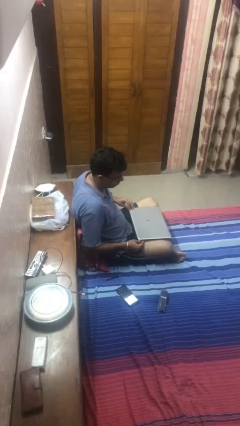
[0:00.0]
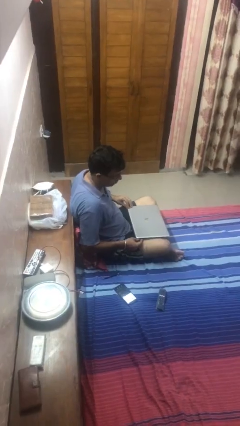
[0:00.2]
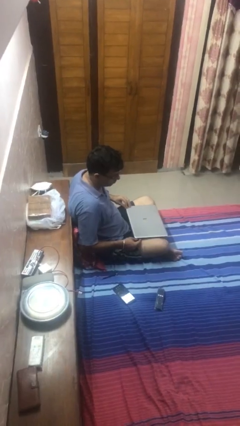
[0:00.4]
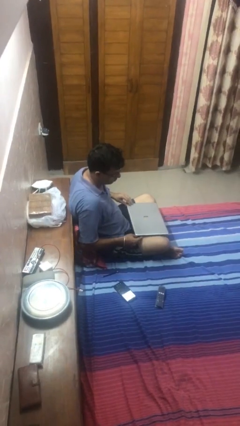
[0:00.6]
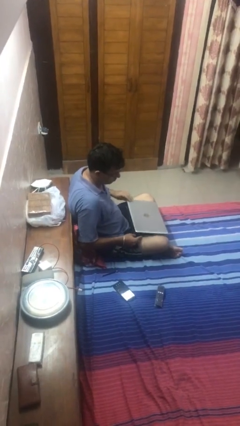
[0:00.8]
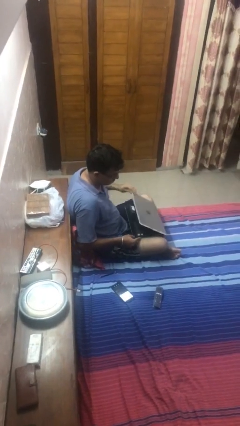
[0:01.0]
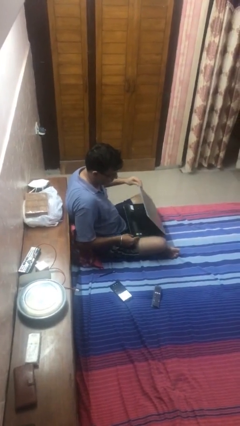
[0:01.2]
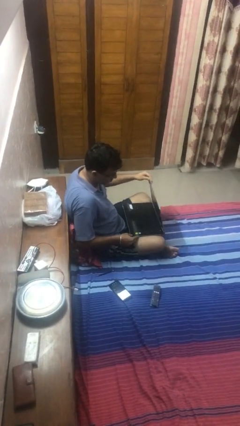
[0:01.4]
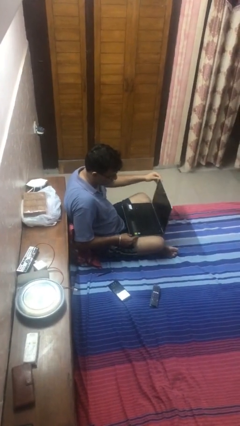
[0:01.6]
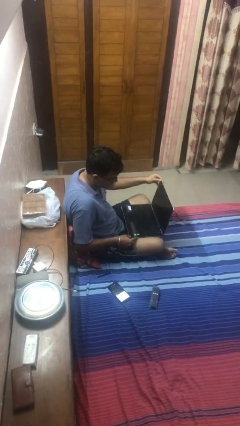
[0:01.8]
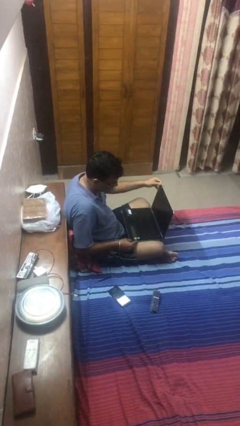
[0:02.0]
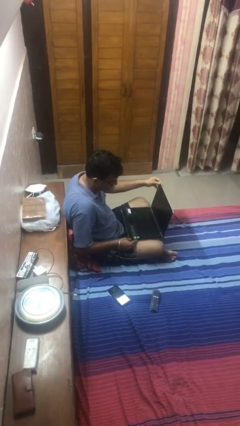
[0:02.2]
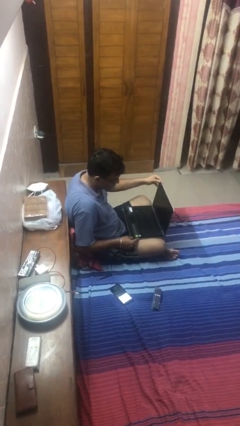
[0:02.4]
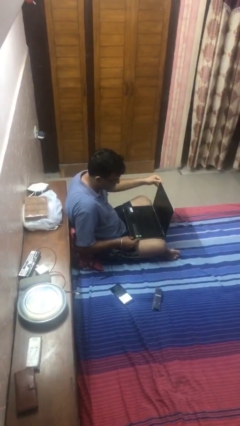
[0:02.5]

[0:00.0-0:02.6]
person opens laptop

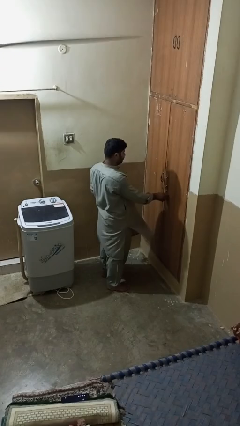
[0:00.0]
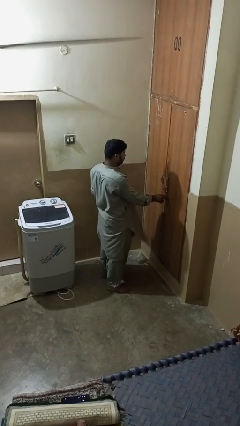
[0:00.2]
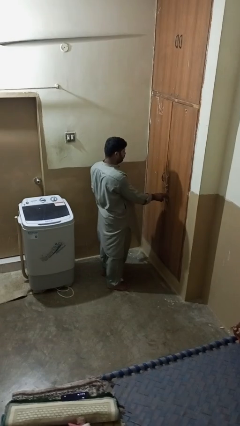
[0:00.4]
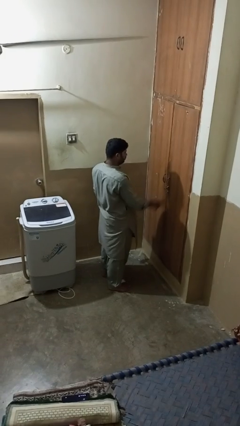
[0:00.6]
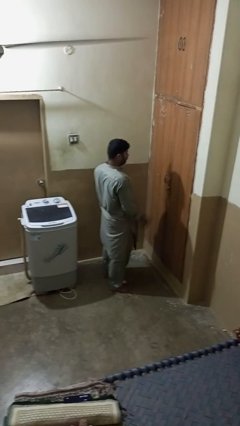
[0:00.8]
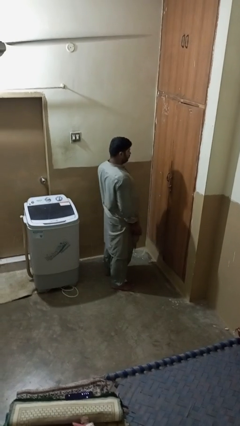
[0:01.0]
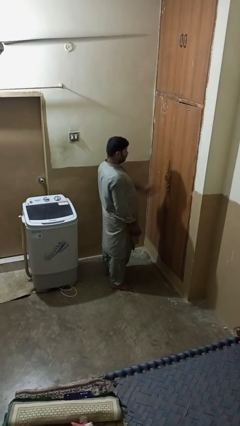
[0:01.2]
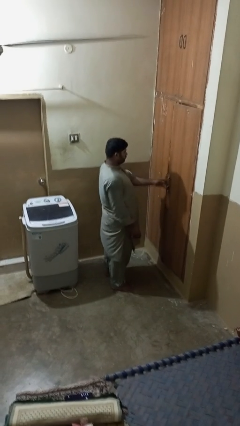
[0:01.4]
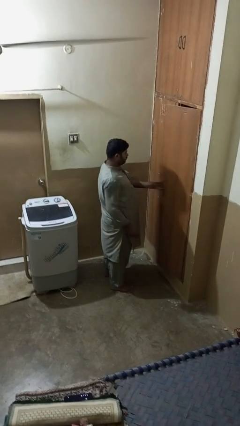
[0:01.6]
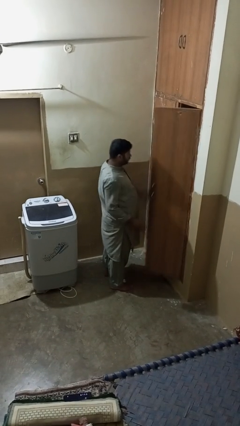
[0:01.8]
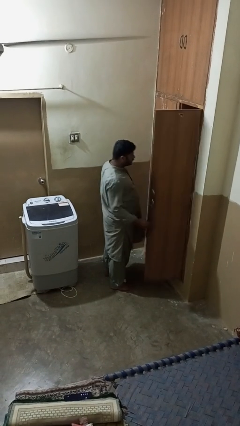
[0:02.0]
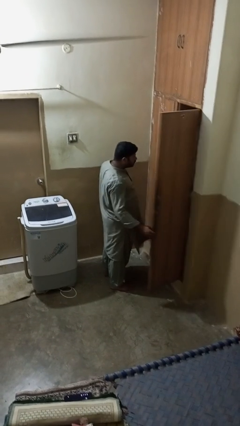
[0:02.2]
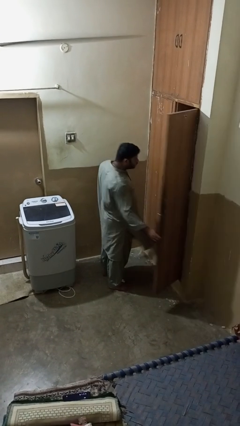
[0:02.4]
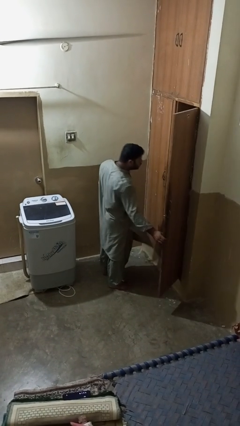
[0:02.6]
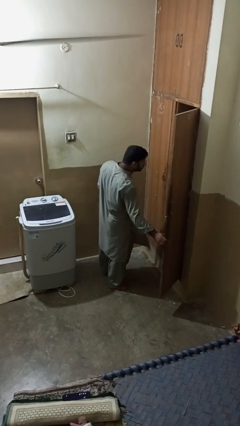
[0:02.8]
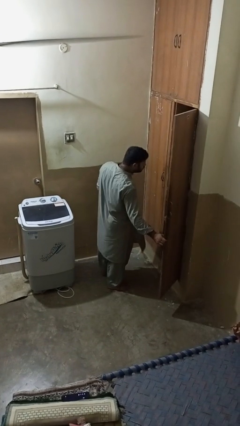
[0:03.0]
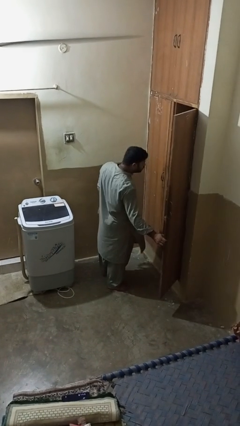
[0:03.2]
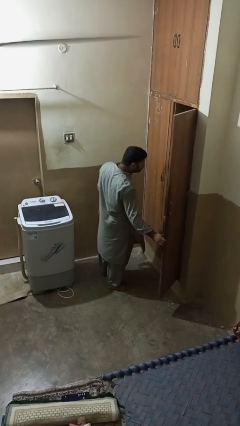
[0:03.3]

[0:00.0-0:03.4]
person opens closet door

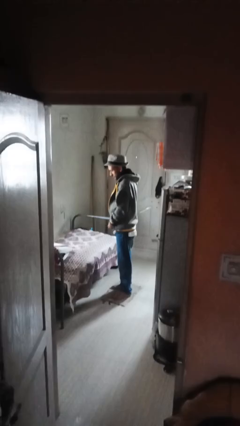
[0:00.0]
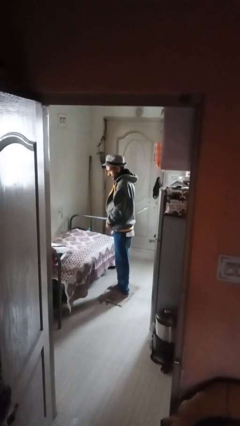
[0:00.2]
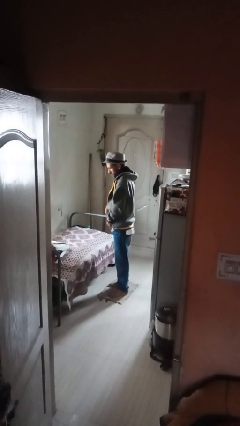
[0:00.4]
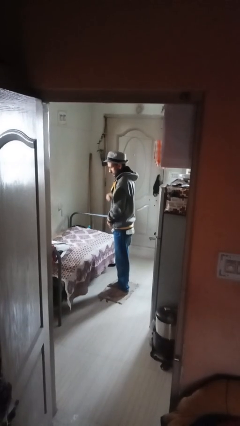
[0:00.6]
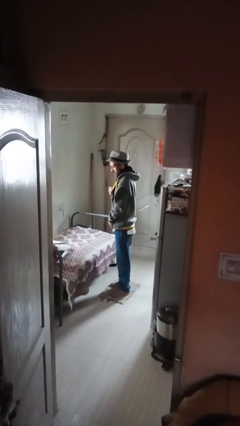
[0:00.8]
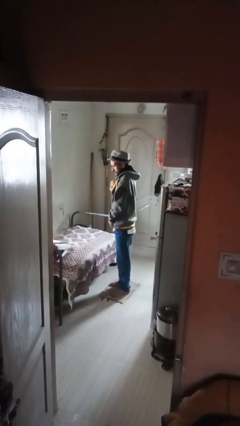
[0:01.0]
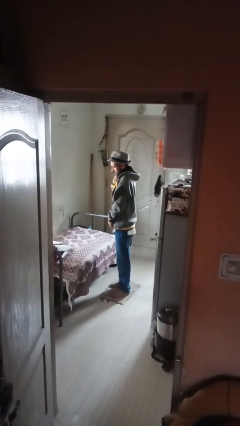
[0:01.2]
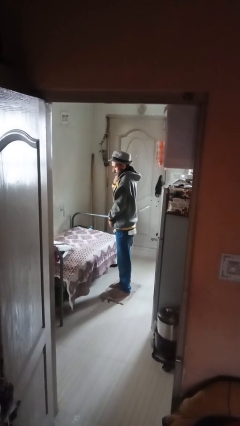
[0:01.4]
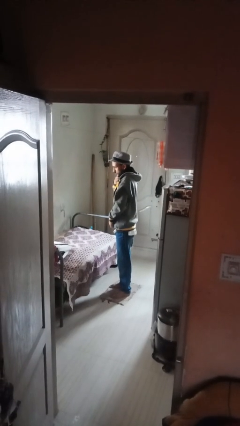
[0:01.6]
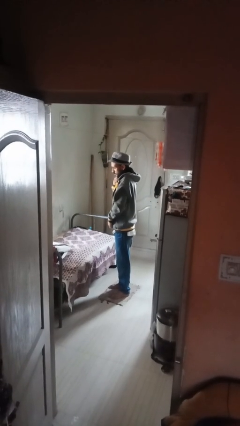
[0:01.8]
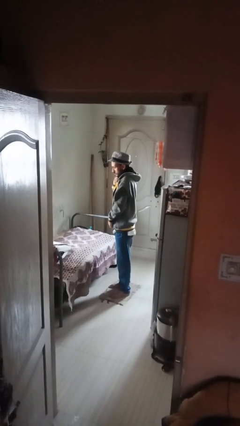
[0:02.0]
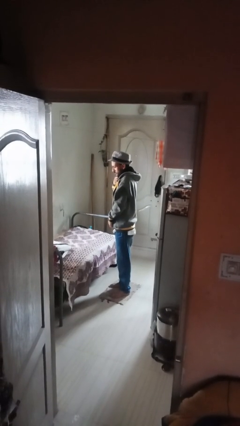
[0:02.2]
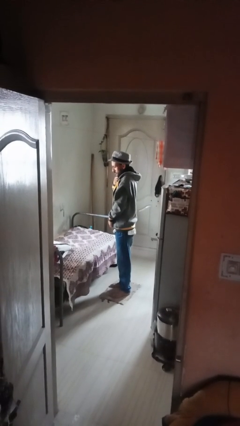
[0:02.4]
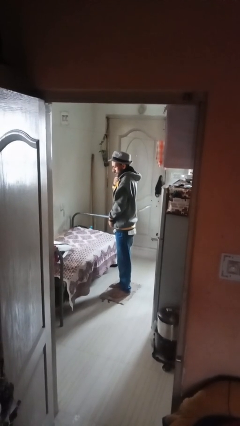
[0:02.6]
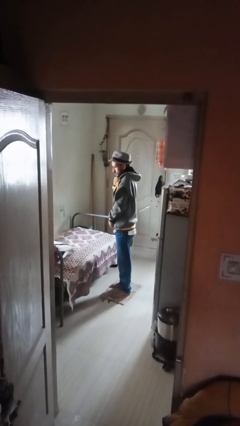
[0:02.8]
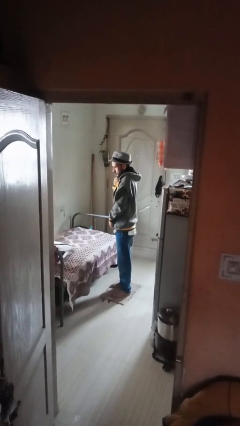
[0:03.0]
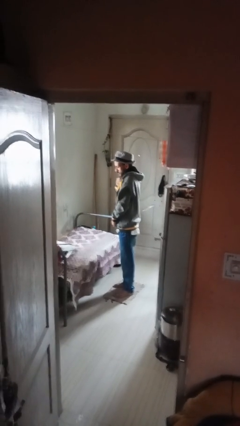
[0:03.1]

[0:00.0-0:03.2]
person zips up jacket

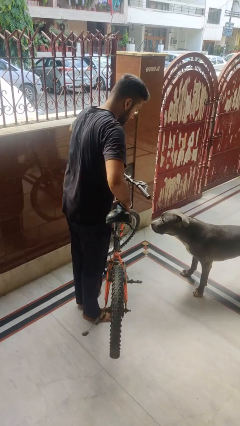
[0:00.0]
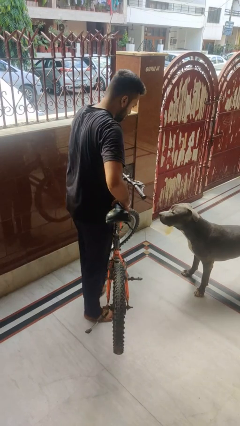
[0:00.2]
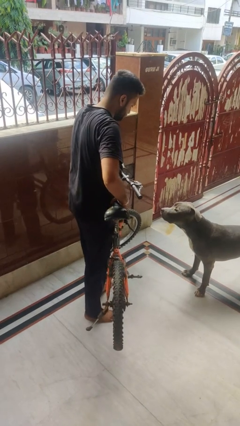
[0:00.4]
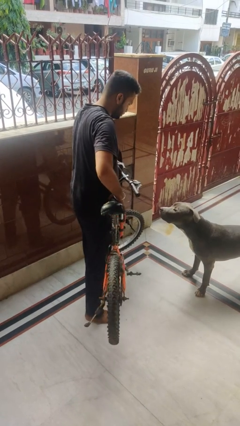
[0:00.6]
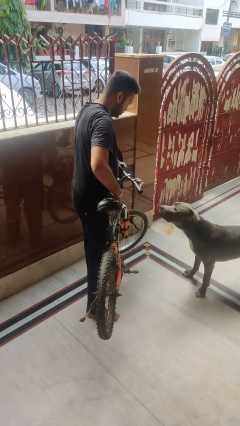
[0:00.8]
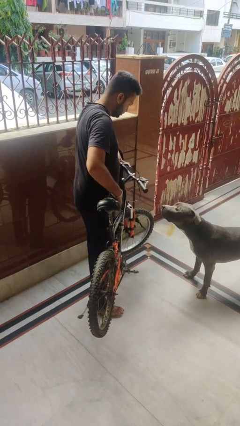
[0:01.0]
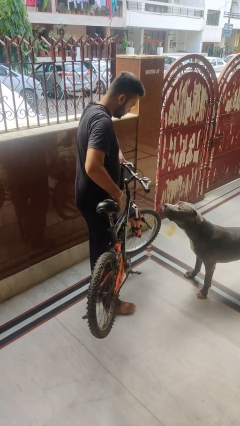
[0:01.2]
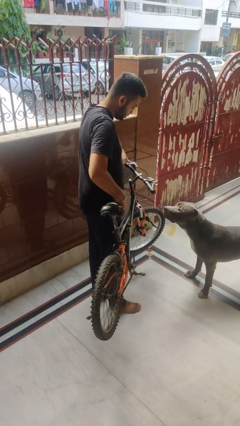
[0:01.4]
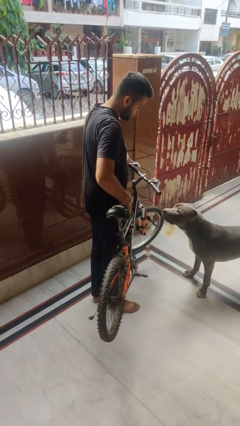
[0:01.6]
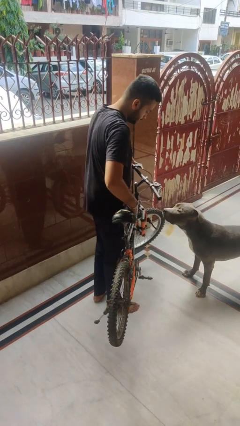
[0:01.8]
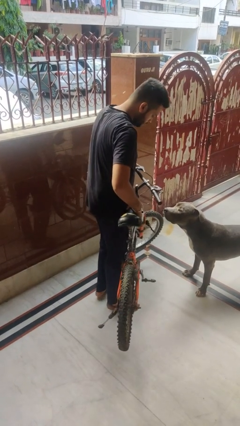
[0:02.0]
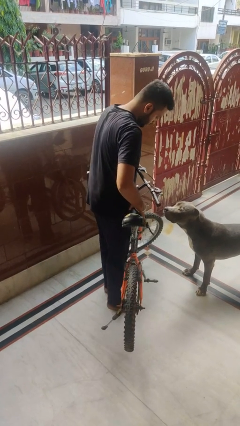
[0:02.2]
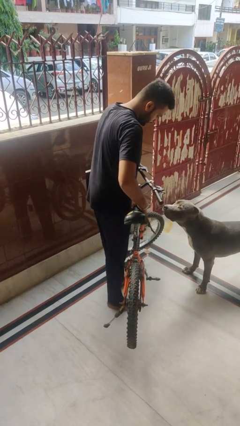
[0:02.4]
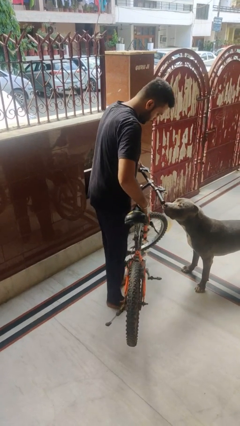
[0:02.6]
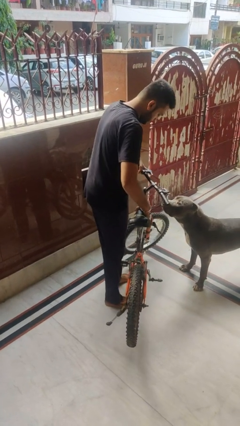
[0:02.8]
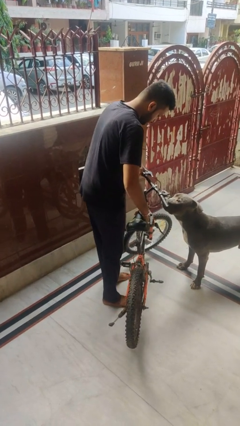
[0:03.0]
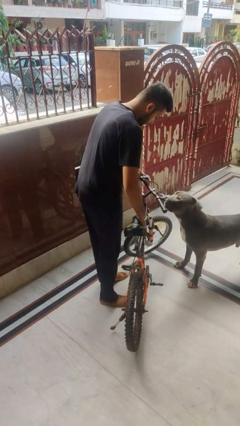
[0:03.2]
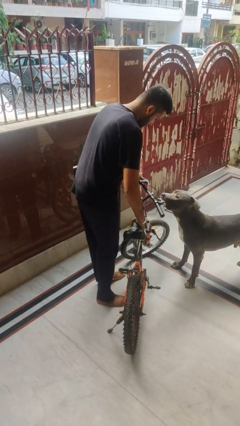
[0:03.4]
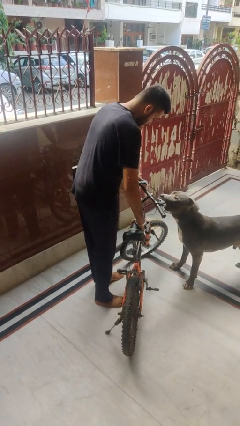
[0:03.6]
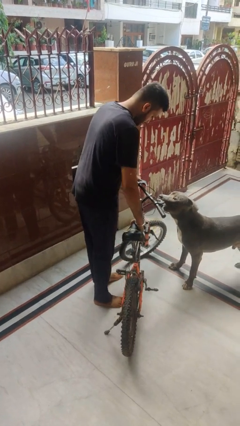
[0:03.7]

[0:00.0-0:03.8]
person carries bicycle

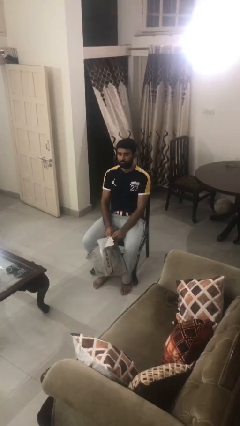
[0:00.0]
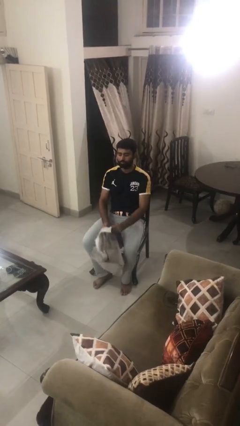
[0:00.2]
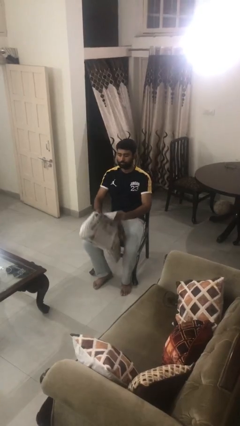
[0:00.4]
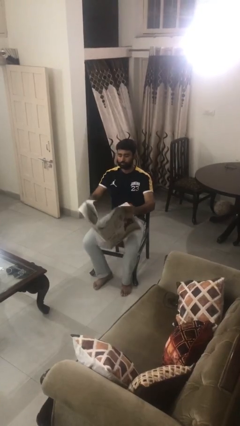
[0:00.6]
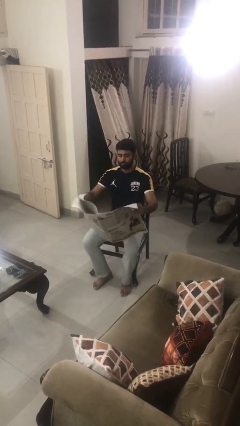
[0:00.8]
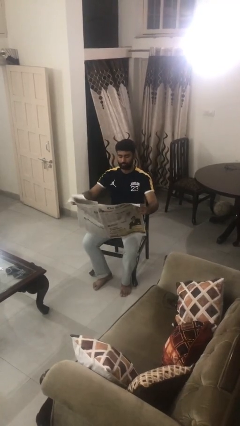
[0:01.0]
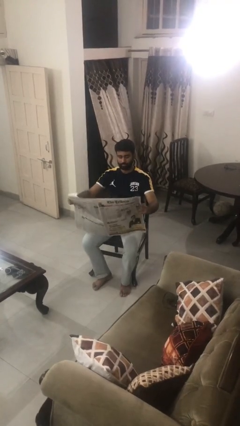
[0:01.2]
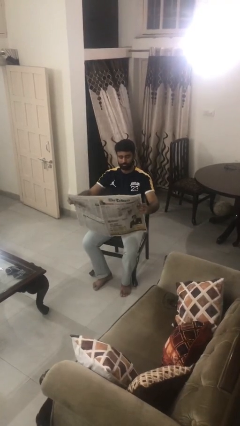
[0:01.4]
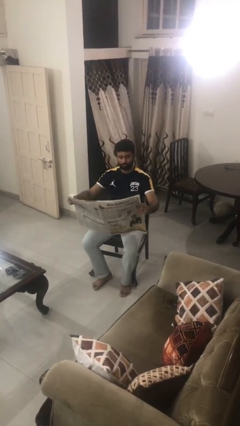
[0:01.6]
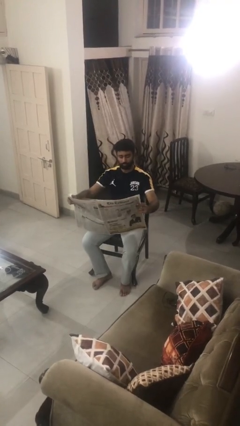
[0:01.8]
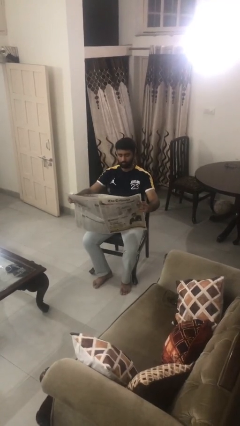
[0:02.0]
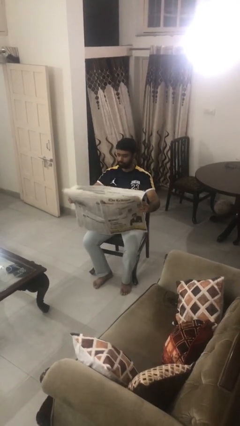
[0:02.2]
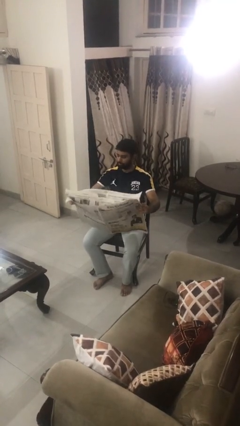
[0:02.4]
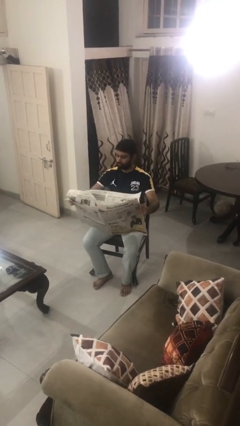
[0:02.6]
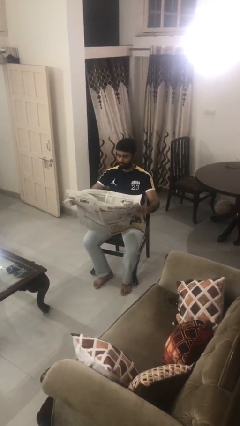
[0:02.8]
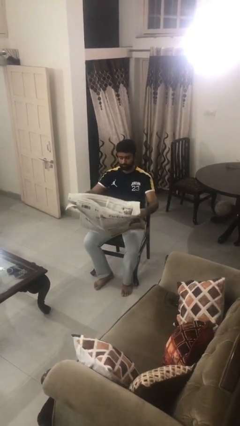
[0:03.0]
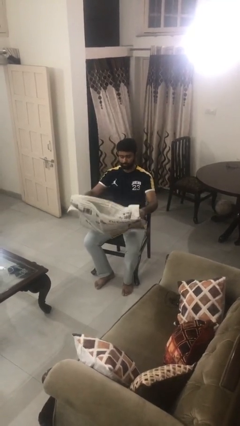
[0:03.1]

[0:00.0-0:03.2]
person reads newspaper

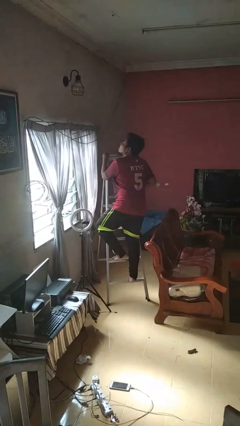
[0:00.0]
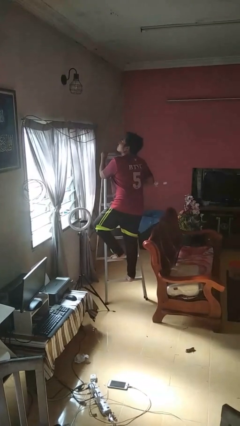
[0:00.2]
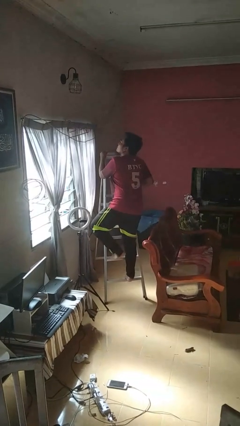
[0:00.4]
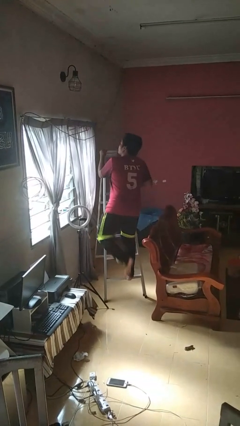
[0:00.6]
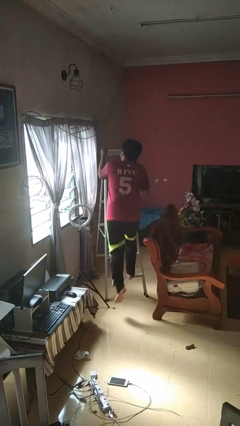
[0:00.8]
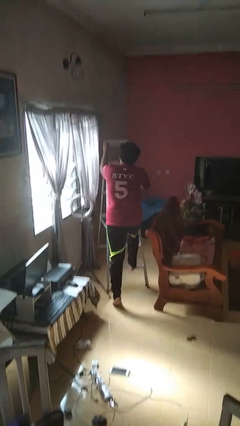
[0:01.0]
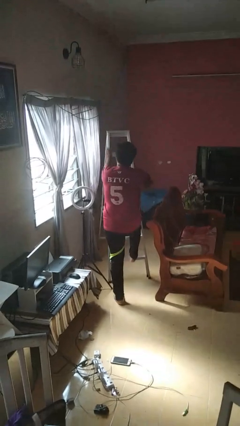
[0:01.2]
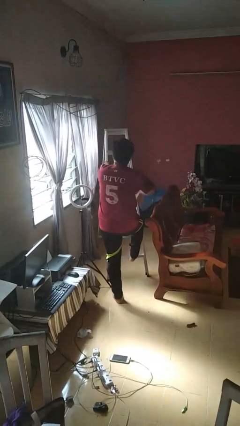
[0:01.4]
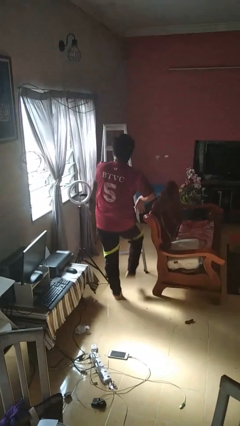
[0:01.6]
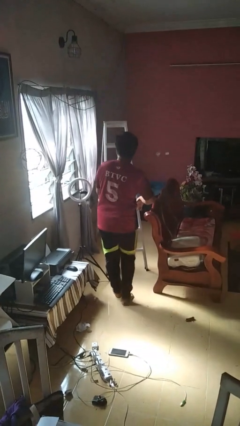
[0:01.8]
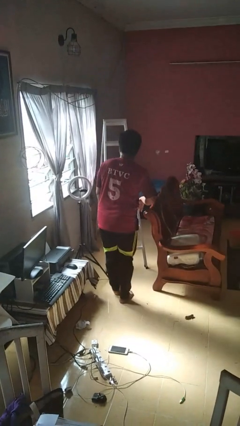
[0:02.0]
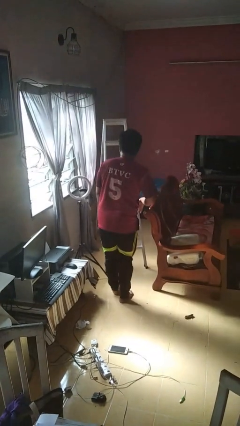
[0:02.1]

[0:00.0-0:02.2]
person climbs down ladder
